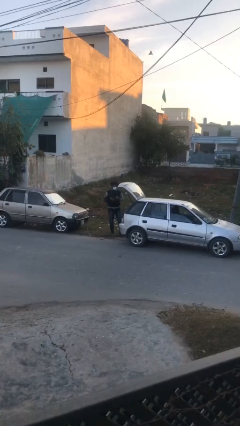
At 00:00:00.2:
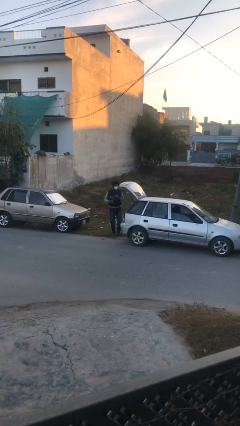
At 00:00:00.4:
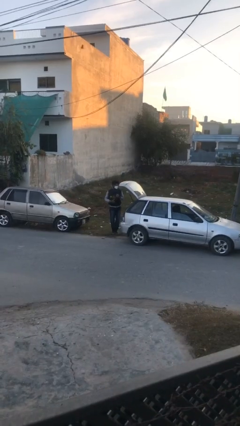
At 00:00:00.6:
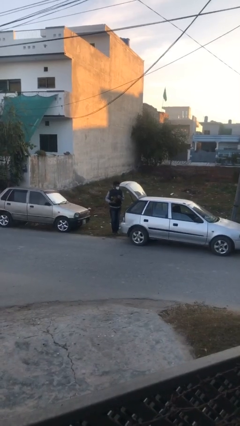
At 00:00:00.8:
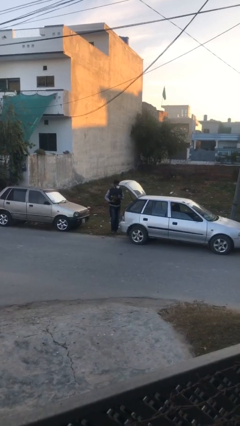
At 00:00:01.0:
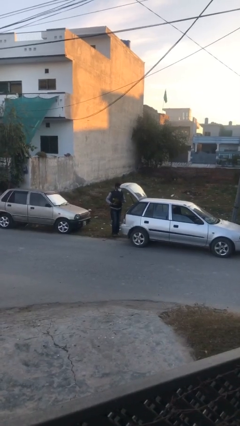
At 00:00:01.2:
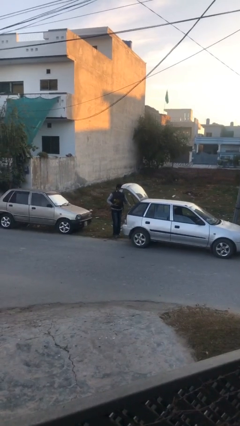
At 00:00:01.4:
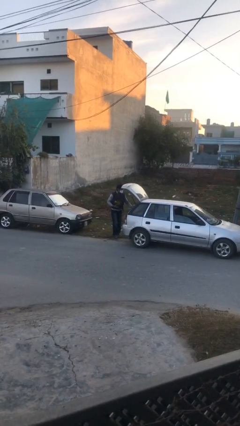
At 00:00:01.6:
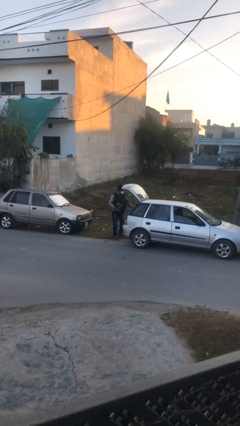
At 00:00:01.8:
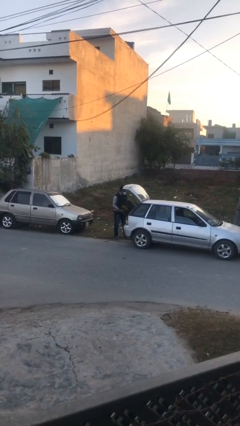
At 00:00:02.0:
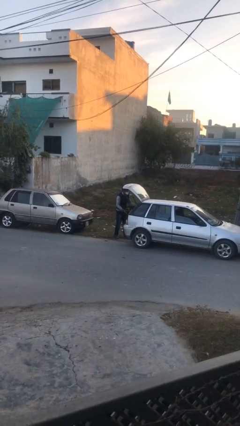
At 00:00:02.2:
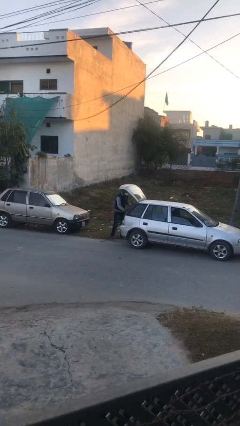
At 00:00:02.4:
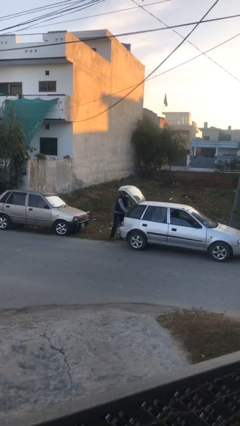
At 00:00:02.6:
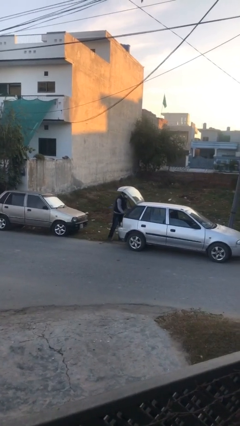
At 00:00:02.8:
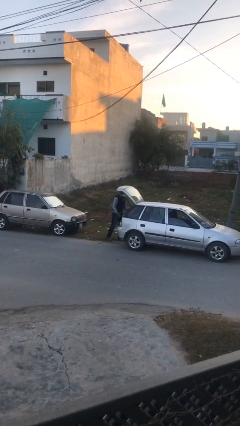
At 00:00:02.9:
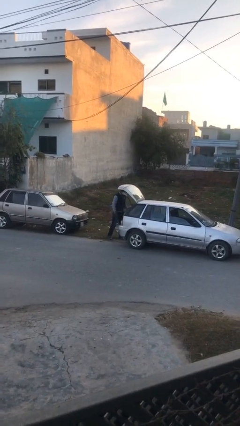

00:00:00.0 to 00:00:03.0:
person loads car

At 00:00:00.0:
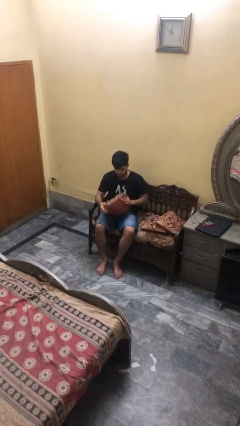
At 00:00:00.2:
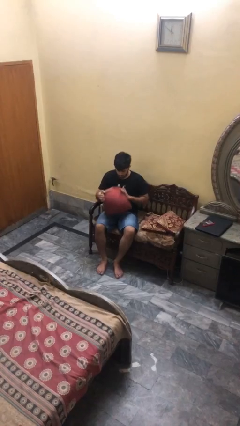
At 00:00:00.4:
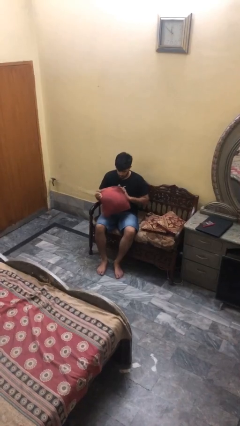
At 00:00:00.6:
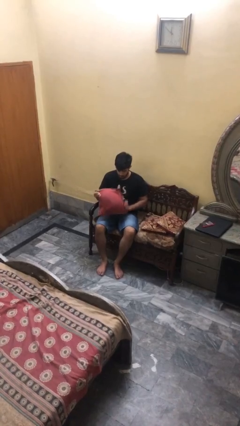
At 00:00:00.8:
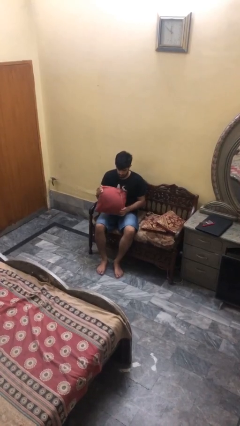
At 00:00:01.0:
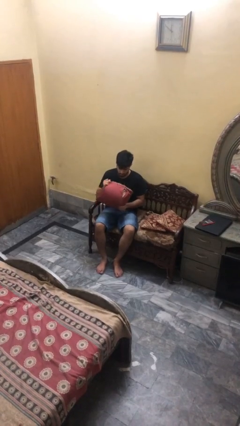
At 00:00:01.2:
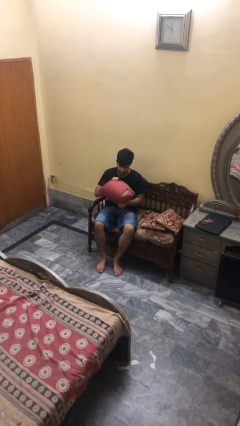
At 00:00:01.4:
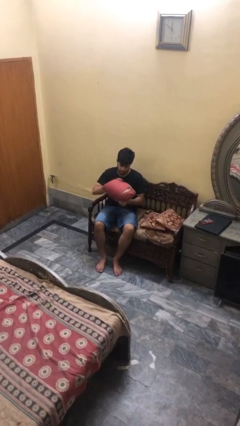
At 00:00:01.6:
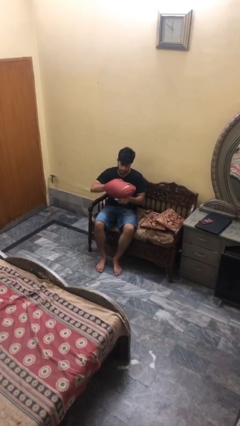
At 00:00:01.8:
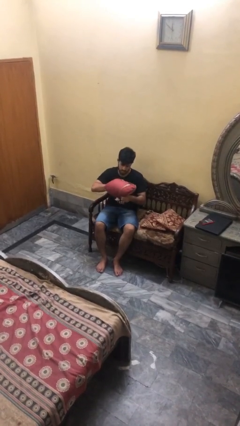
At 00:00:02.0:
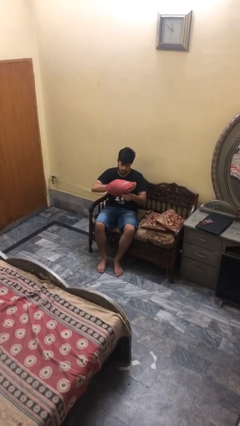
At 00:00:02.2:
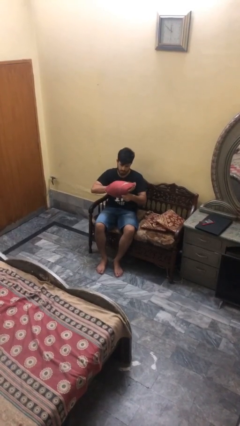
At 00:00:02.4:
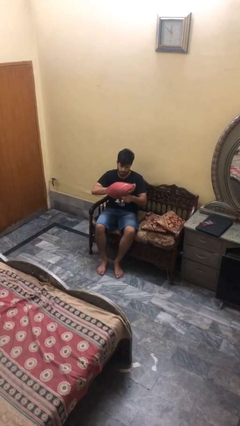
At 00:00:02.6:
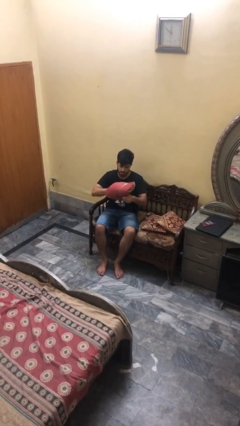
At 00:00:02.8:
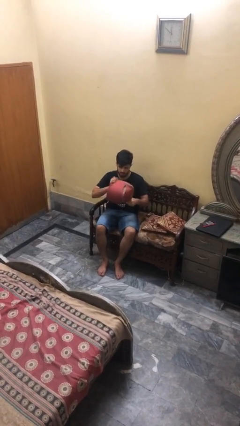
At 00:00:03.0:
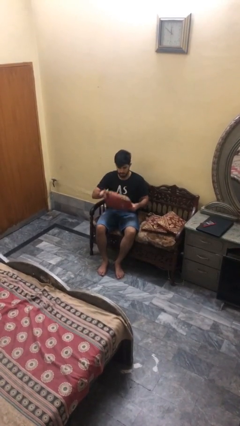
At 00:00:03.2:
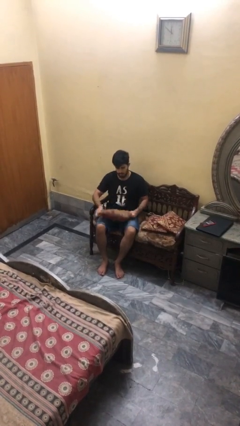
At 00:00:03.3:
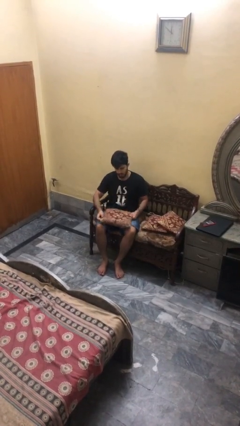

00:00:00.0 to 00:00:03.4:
person squeezes object

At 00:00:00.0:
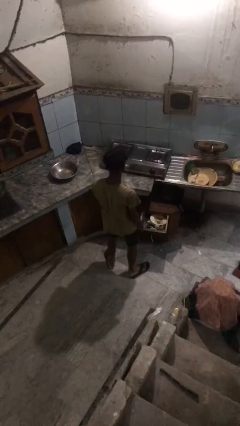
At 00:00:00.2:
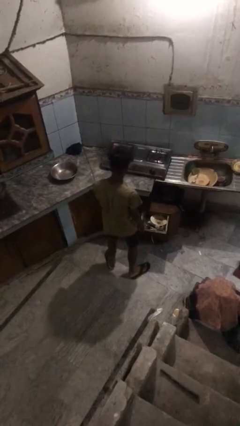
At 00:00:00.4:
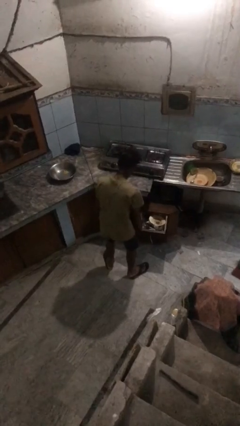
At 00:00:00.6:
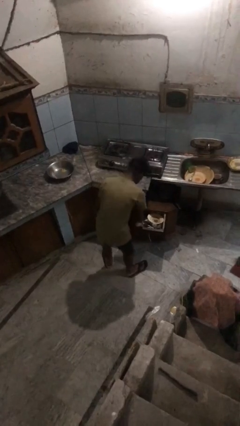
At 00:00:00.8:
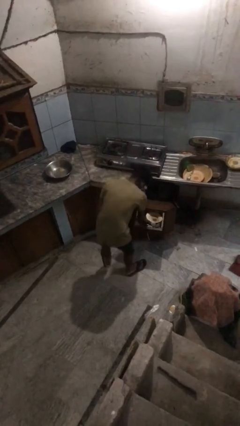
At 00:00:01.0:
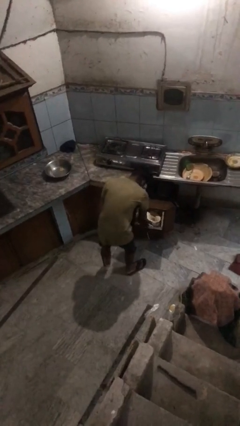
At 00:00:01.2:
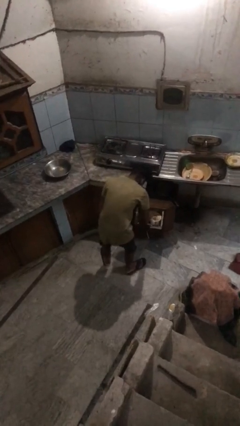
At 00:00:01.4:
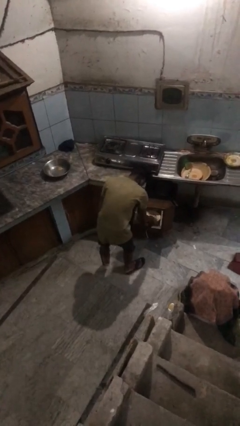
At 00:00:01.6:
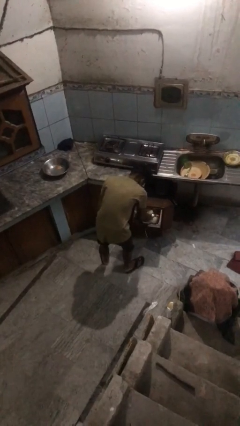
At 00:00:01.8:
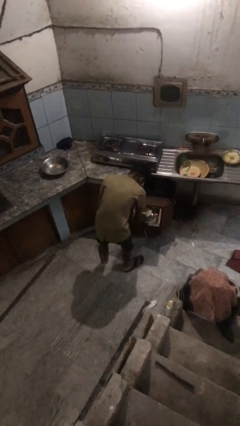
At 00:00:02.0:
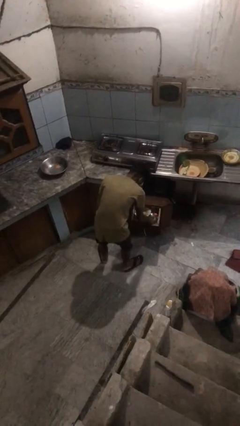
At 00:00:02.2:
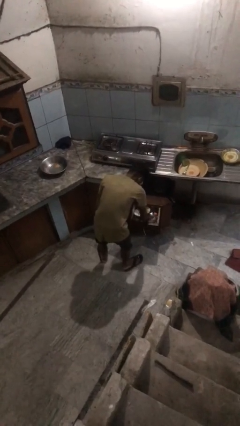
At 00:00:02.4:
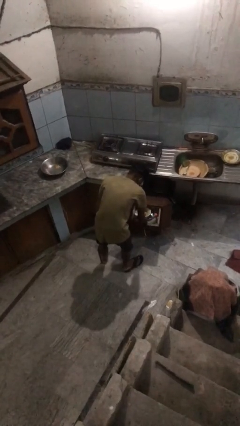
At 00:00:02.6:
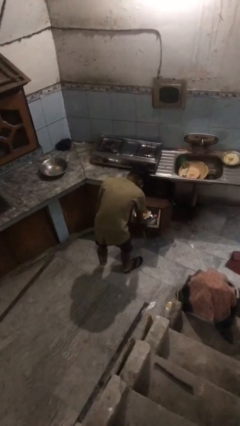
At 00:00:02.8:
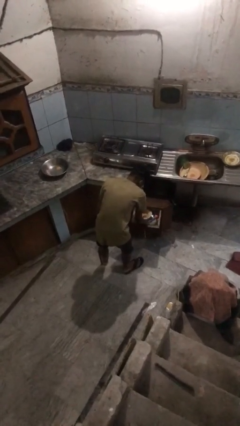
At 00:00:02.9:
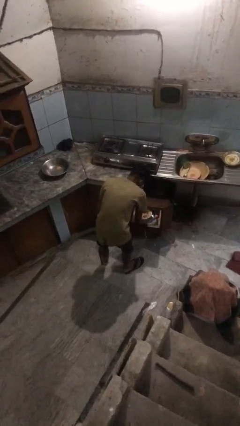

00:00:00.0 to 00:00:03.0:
person searches in kitchen drawer

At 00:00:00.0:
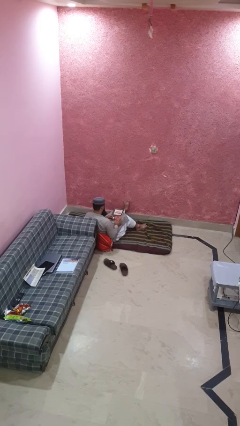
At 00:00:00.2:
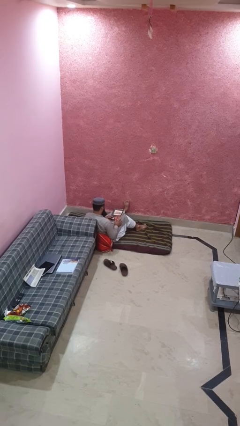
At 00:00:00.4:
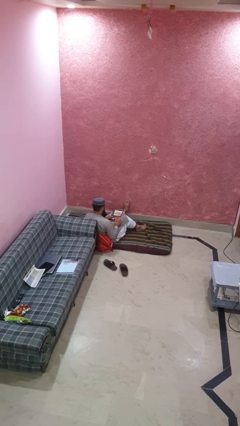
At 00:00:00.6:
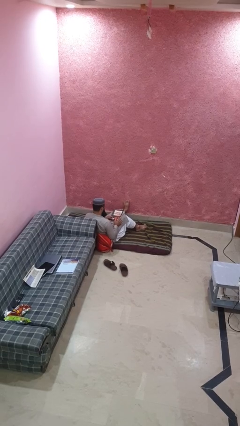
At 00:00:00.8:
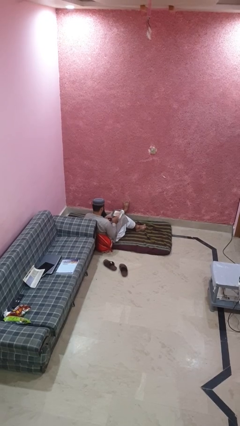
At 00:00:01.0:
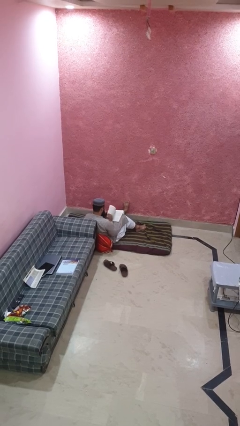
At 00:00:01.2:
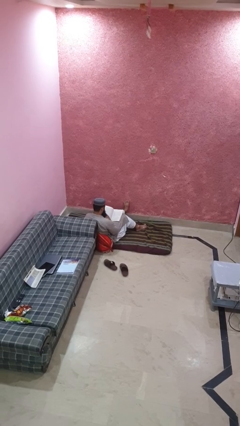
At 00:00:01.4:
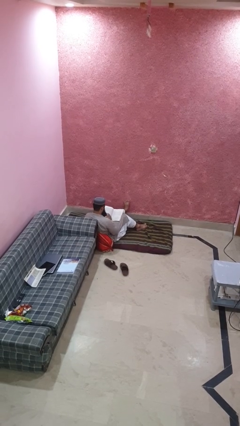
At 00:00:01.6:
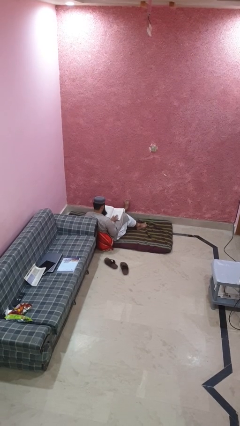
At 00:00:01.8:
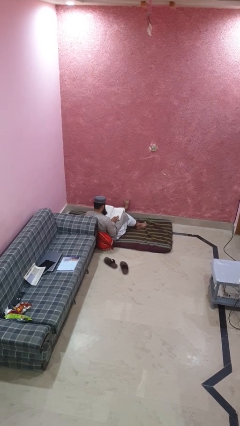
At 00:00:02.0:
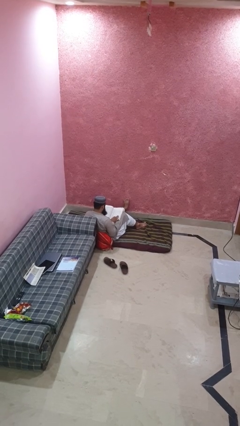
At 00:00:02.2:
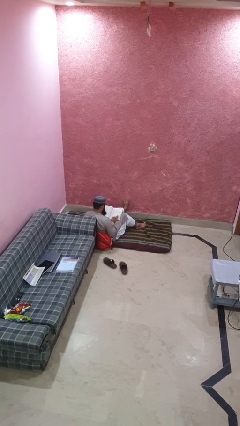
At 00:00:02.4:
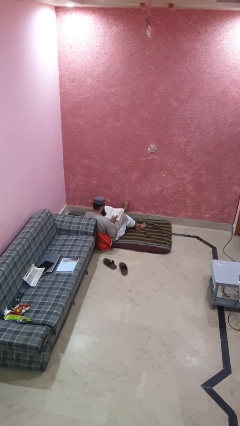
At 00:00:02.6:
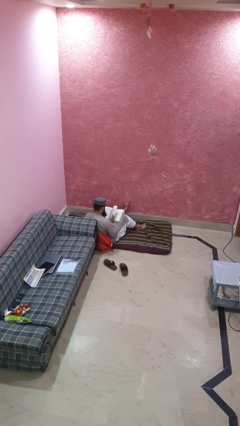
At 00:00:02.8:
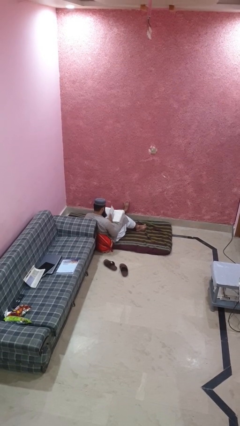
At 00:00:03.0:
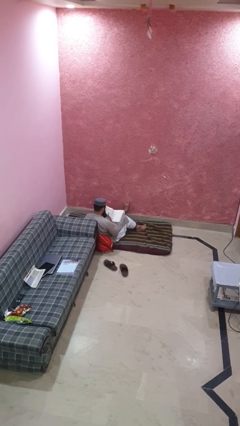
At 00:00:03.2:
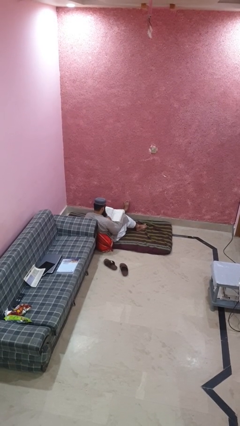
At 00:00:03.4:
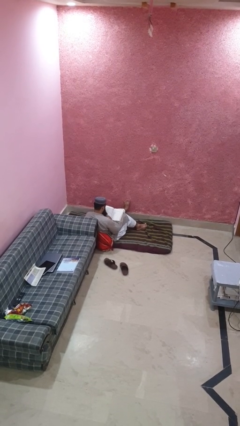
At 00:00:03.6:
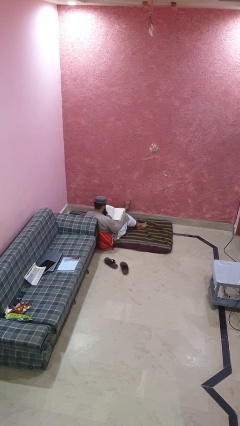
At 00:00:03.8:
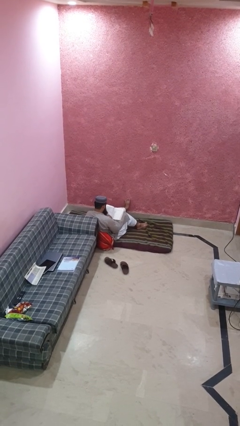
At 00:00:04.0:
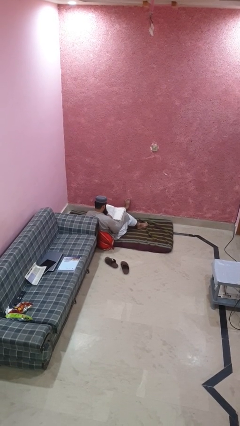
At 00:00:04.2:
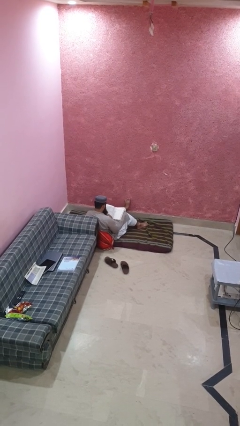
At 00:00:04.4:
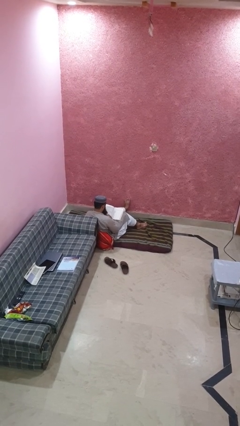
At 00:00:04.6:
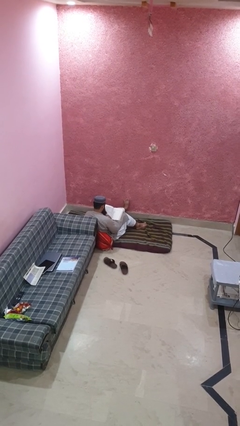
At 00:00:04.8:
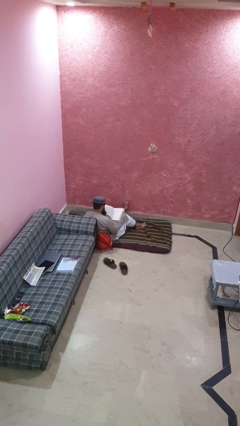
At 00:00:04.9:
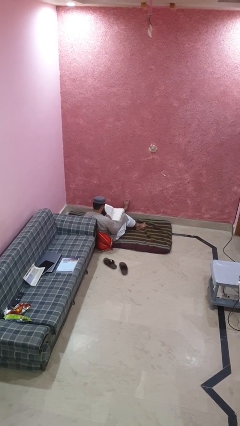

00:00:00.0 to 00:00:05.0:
person reads book

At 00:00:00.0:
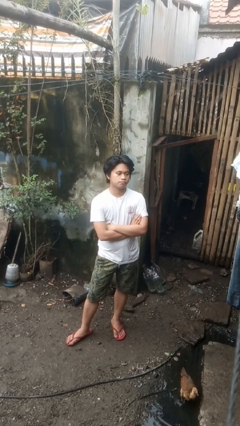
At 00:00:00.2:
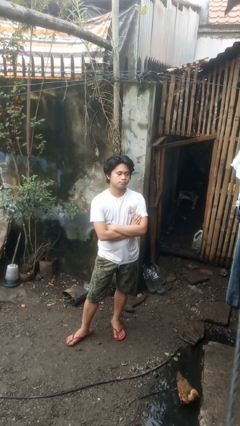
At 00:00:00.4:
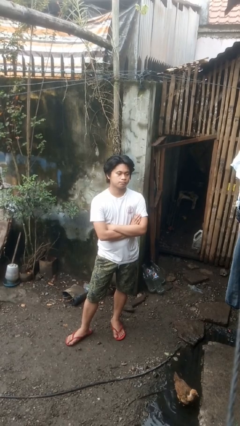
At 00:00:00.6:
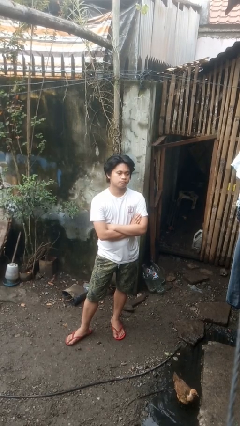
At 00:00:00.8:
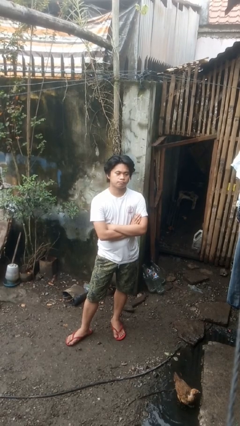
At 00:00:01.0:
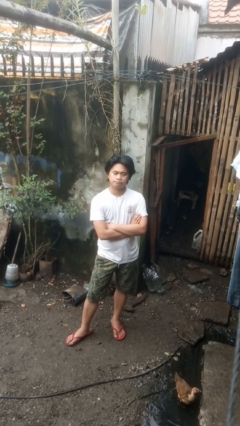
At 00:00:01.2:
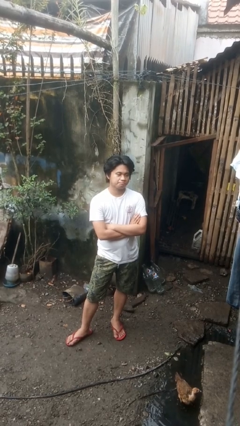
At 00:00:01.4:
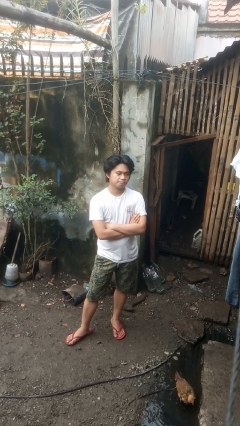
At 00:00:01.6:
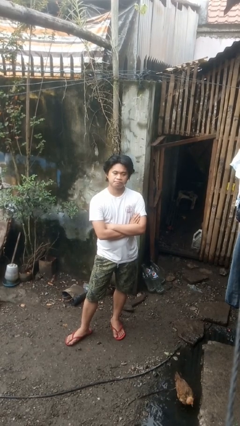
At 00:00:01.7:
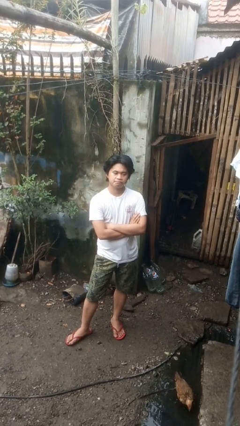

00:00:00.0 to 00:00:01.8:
person shakes head

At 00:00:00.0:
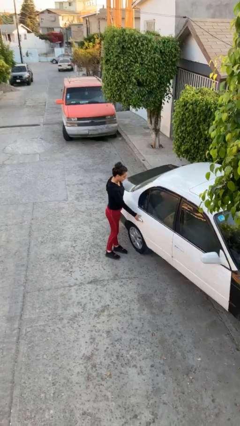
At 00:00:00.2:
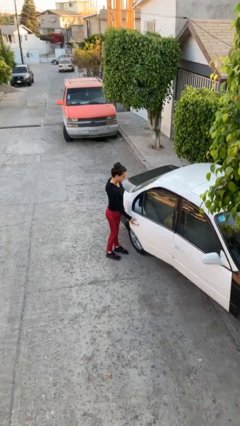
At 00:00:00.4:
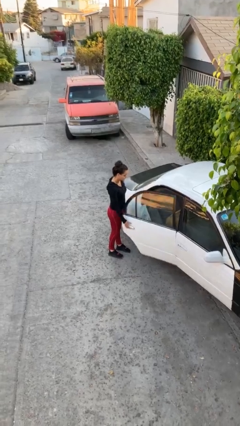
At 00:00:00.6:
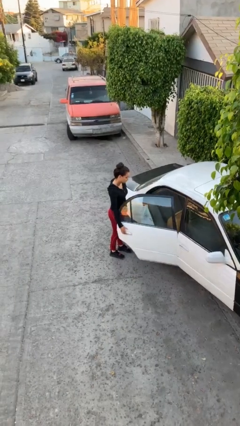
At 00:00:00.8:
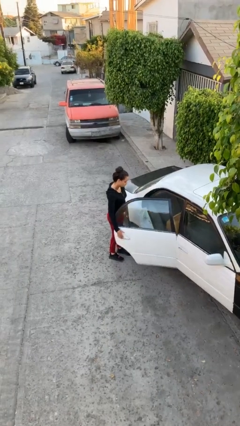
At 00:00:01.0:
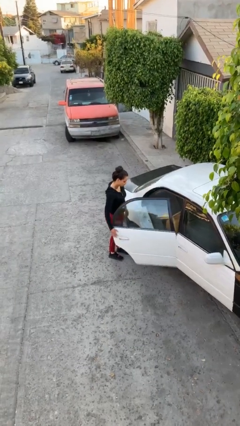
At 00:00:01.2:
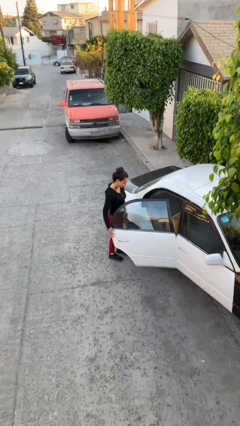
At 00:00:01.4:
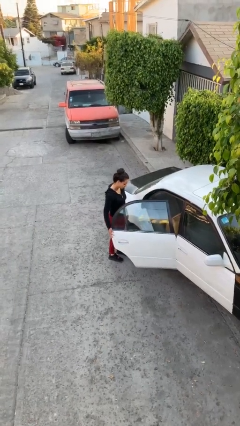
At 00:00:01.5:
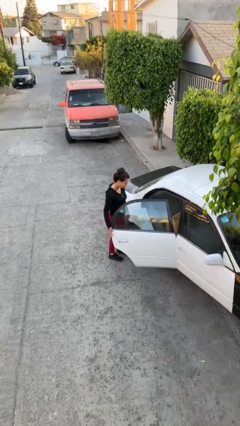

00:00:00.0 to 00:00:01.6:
person opens car door
